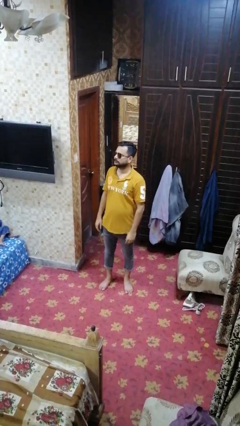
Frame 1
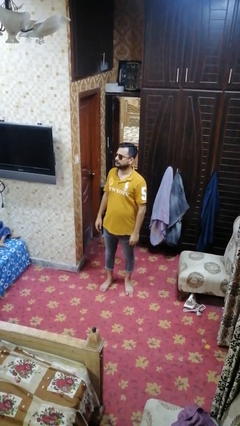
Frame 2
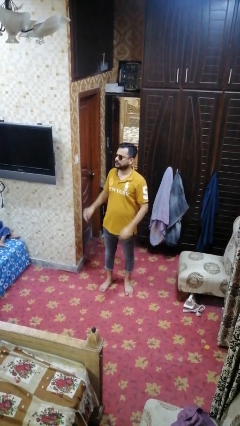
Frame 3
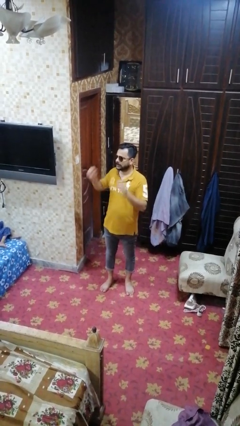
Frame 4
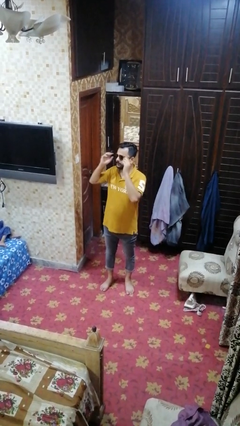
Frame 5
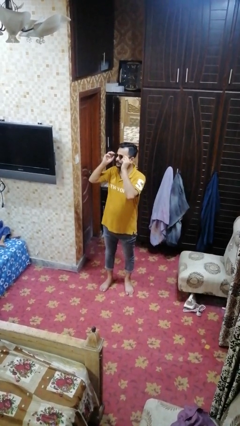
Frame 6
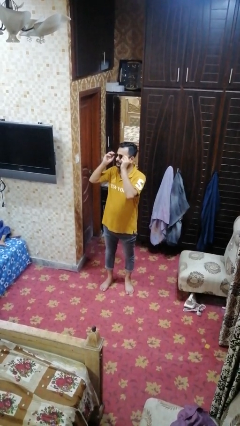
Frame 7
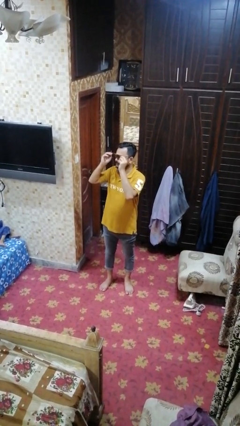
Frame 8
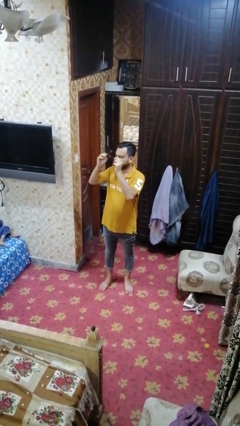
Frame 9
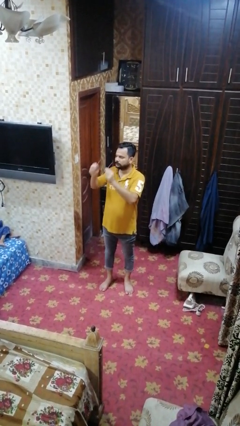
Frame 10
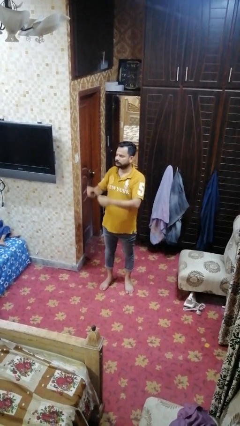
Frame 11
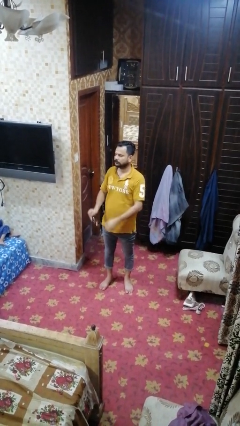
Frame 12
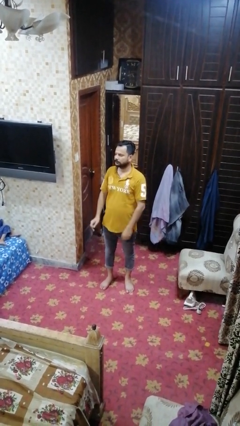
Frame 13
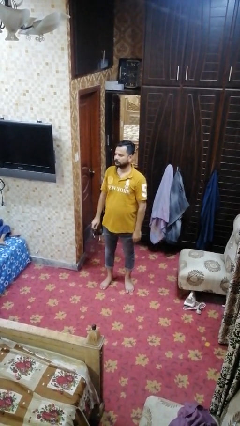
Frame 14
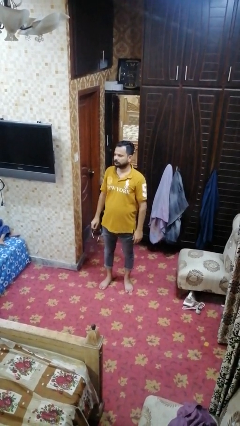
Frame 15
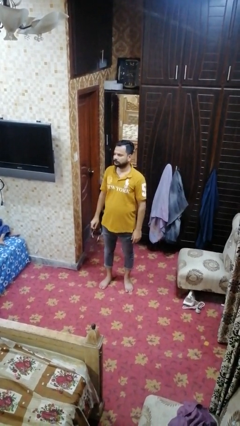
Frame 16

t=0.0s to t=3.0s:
person takes off sunglasses

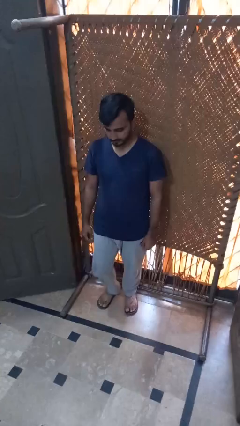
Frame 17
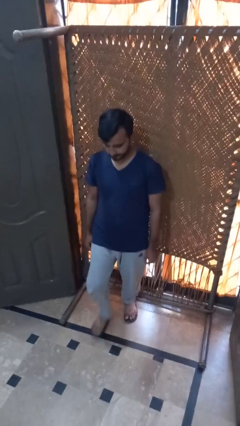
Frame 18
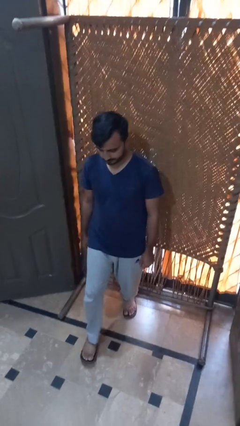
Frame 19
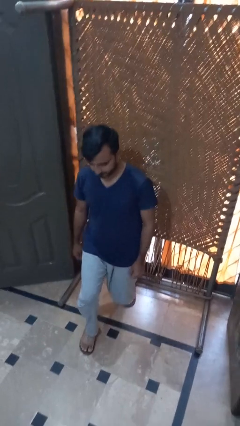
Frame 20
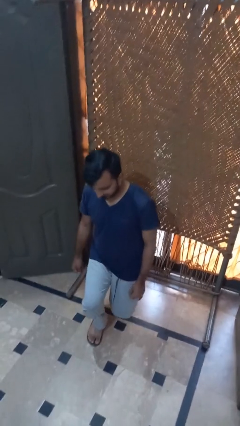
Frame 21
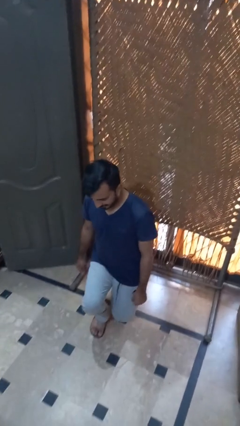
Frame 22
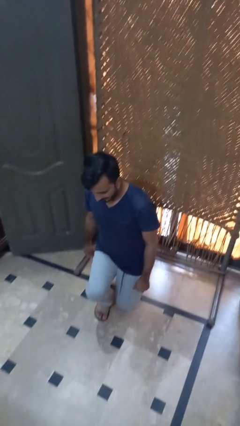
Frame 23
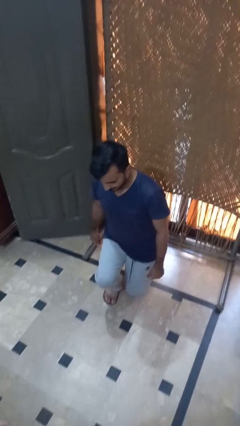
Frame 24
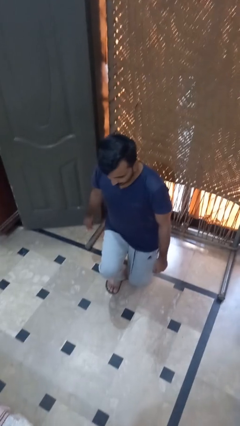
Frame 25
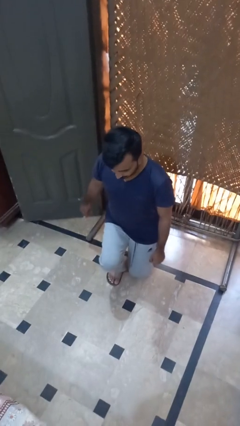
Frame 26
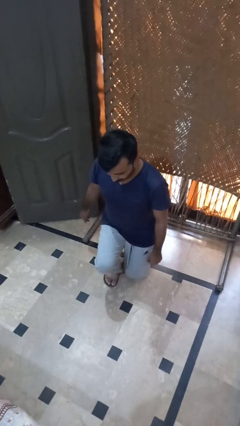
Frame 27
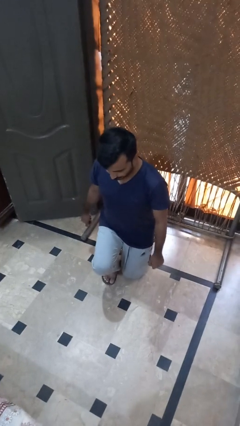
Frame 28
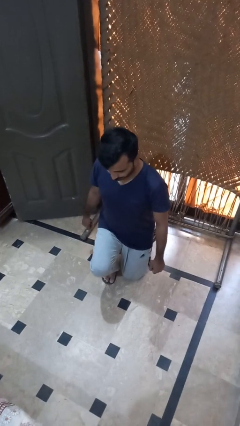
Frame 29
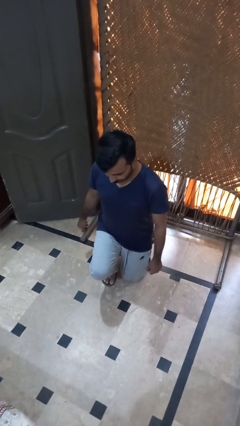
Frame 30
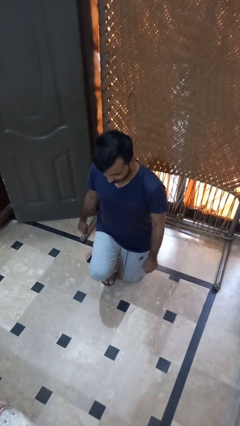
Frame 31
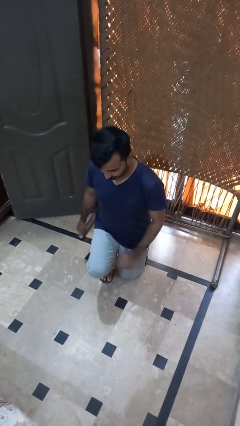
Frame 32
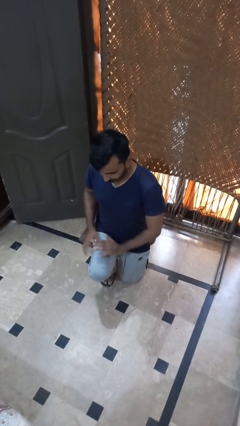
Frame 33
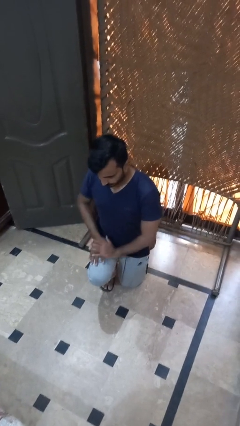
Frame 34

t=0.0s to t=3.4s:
person exercises with lunges

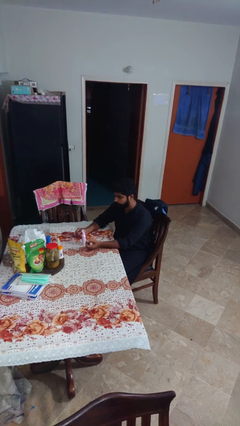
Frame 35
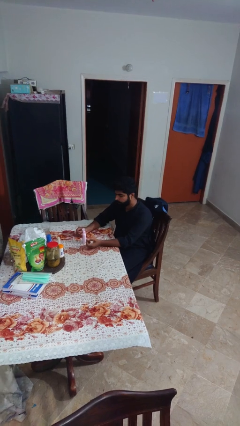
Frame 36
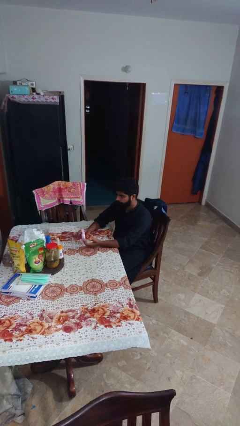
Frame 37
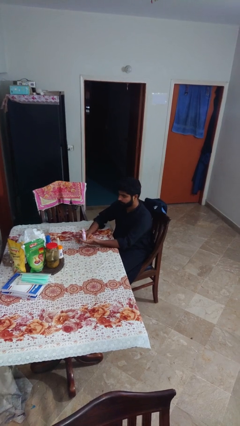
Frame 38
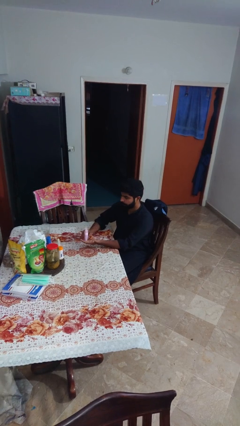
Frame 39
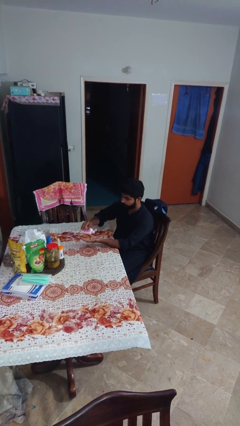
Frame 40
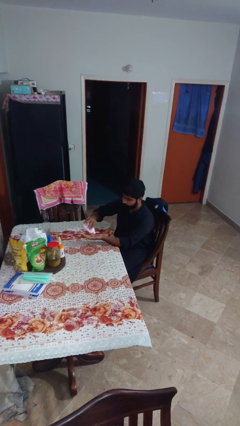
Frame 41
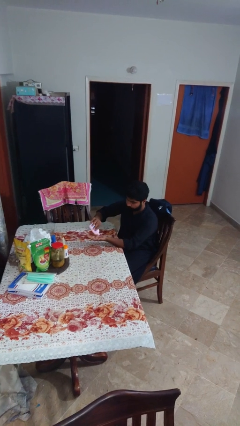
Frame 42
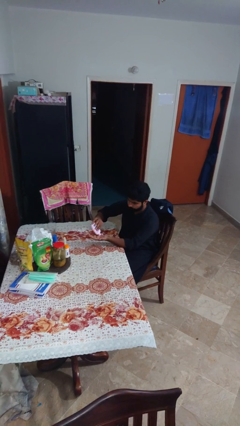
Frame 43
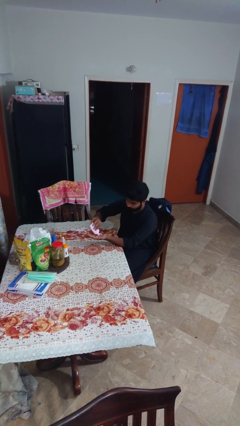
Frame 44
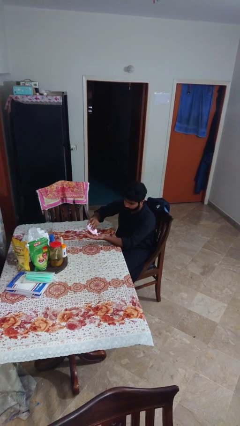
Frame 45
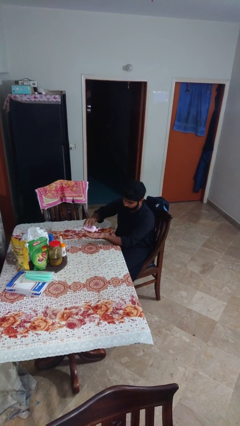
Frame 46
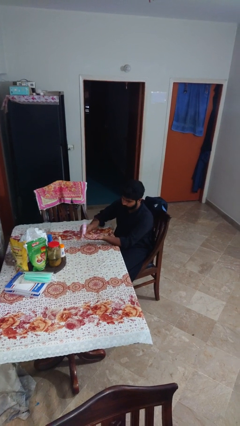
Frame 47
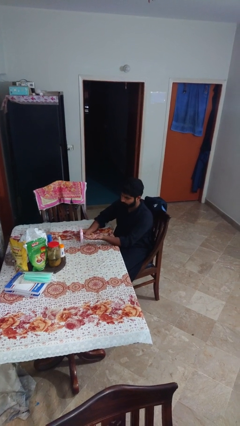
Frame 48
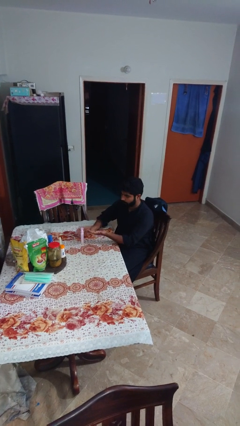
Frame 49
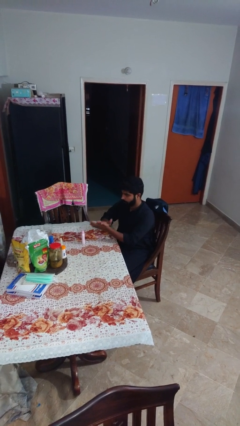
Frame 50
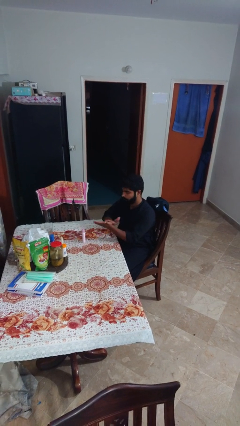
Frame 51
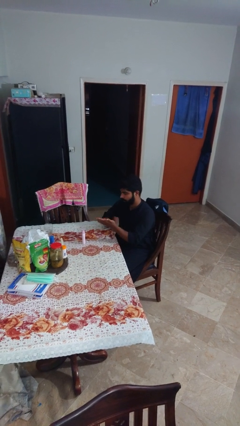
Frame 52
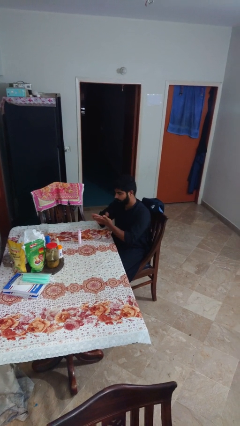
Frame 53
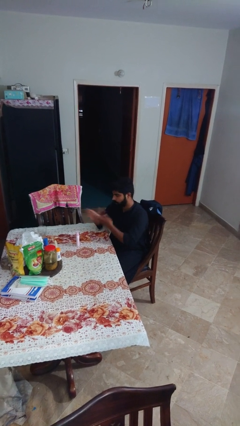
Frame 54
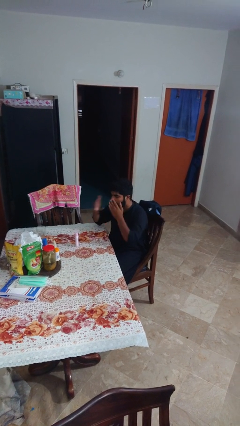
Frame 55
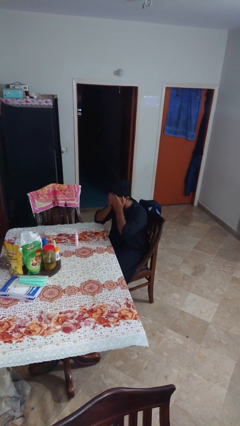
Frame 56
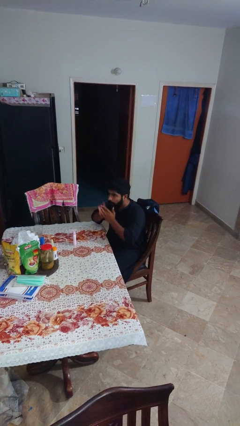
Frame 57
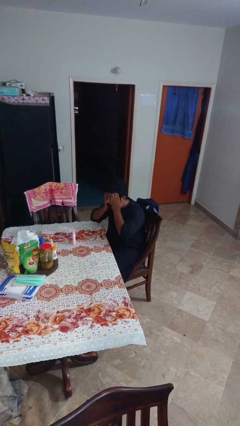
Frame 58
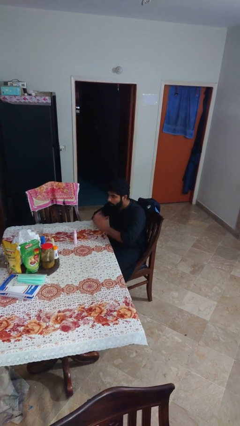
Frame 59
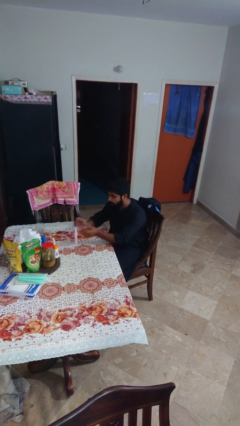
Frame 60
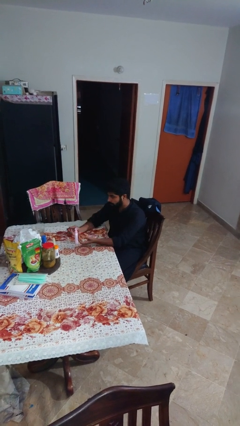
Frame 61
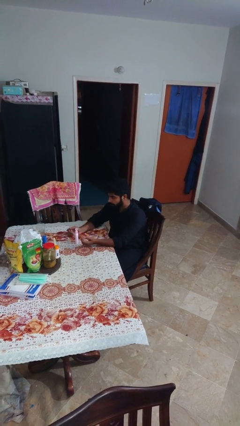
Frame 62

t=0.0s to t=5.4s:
person applies facial moisturizer

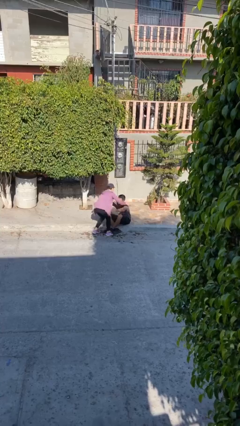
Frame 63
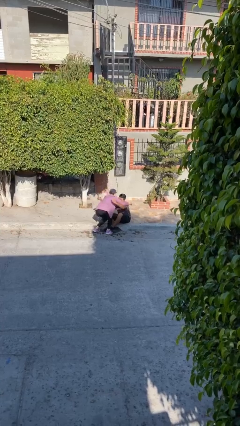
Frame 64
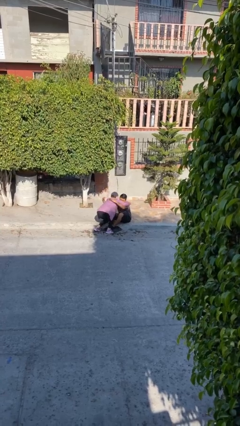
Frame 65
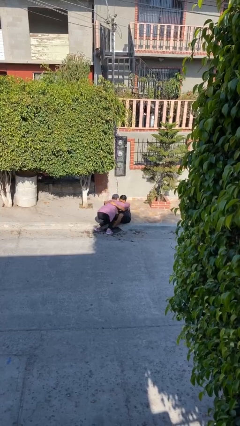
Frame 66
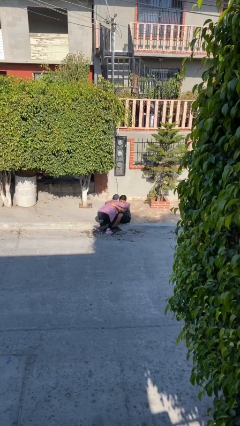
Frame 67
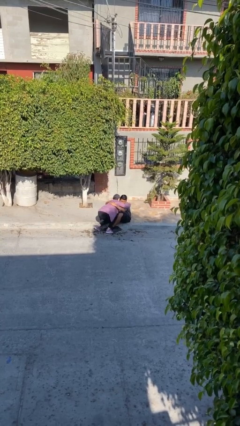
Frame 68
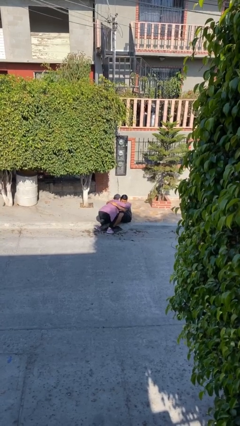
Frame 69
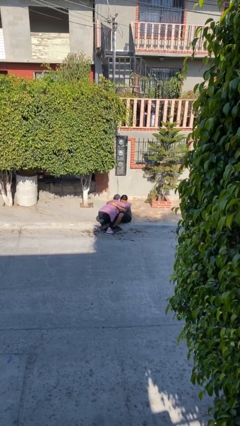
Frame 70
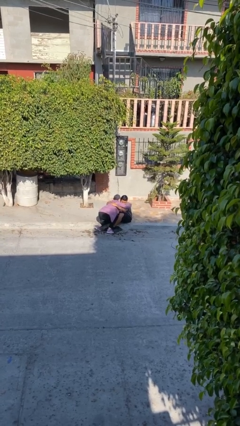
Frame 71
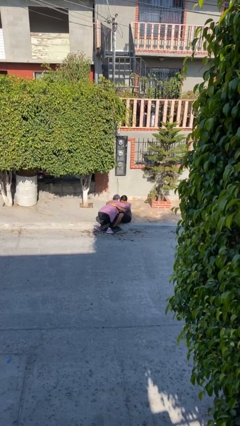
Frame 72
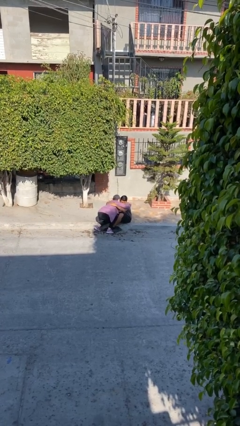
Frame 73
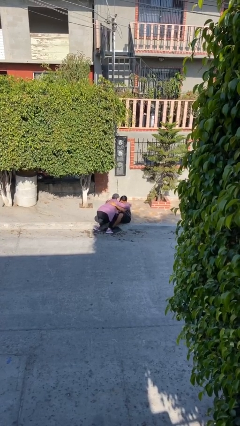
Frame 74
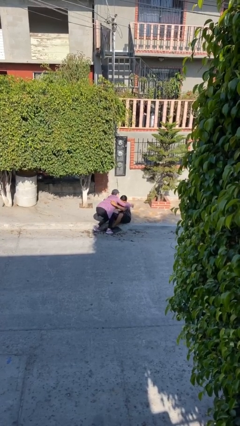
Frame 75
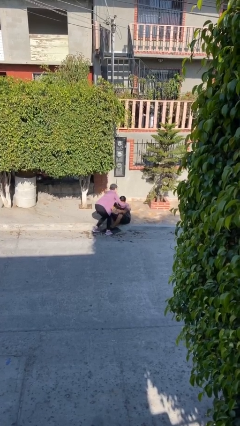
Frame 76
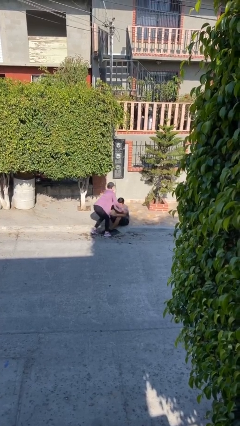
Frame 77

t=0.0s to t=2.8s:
person embraces person

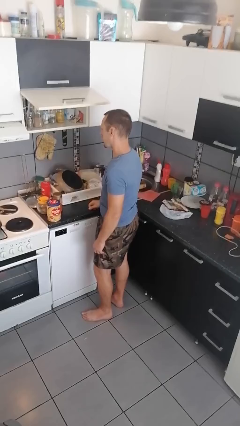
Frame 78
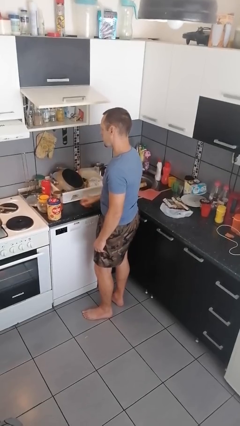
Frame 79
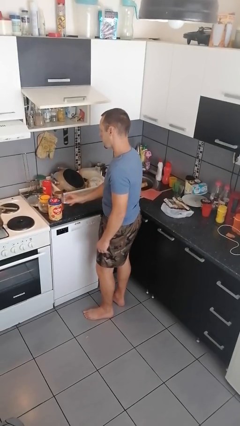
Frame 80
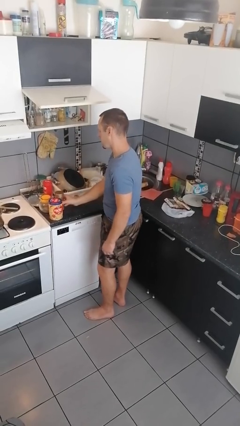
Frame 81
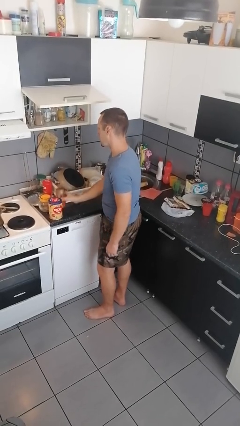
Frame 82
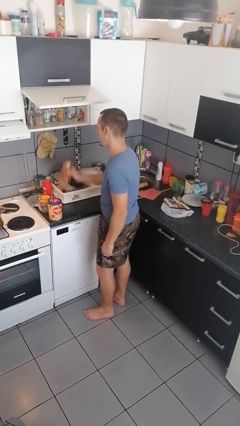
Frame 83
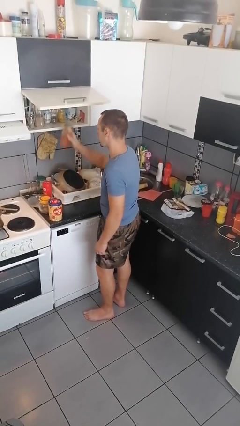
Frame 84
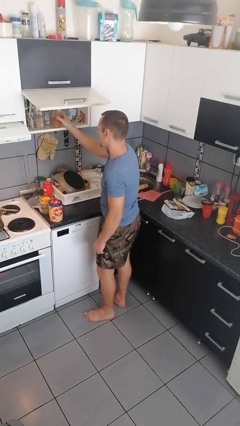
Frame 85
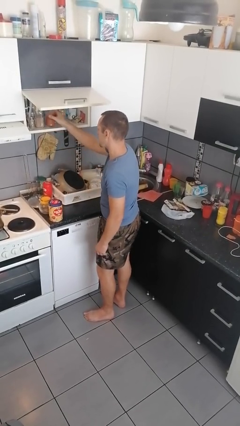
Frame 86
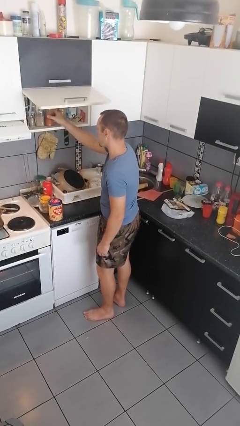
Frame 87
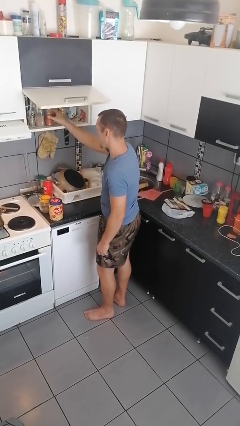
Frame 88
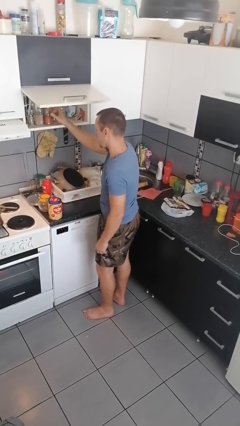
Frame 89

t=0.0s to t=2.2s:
person loads groceries into cabinet

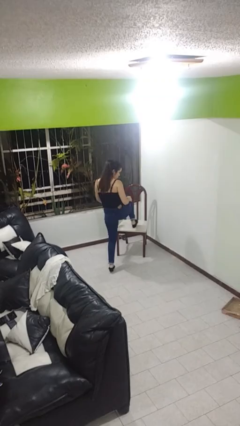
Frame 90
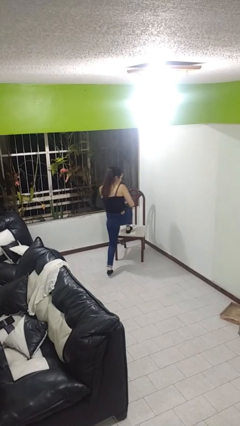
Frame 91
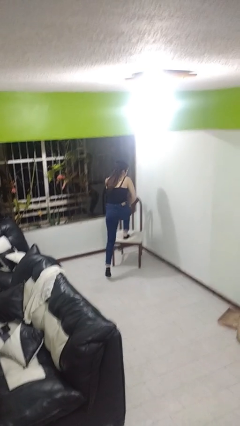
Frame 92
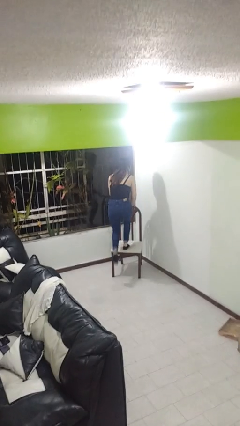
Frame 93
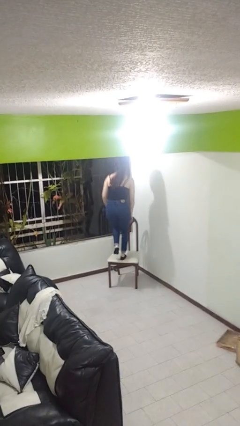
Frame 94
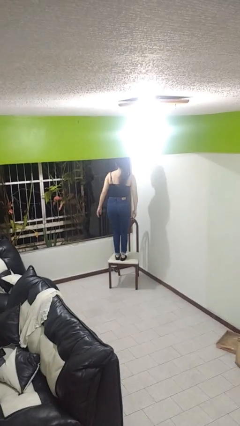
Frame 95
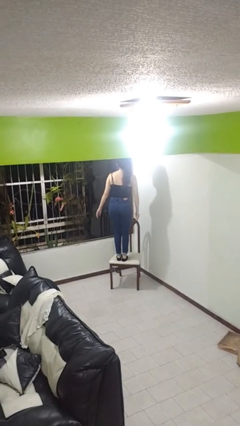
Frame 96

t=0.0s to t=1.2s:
person climbs on chair
